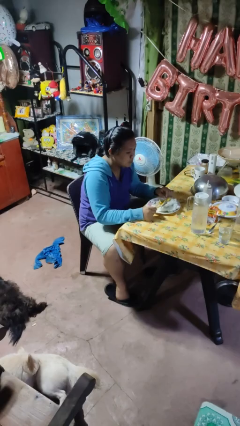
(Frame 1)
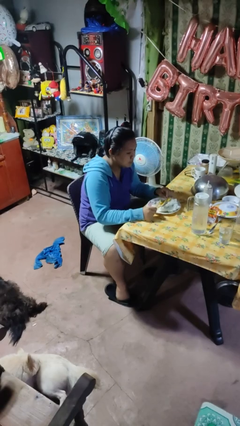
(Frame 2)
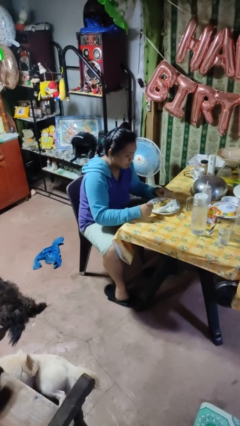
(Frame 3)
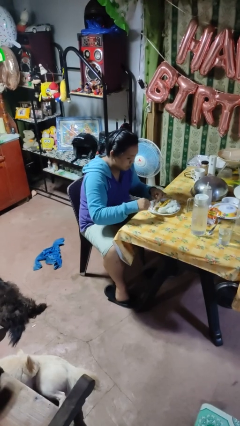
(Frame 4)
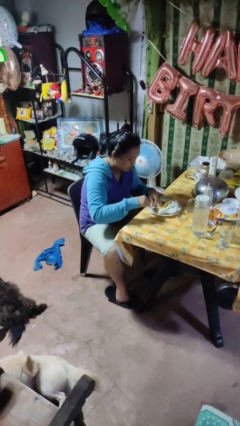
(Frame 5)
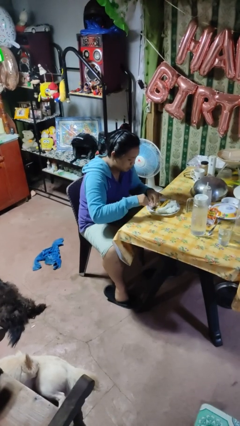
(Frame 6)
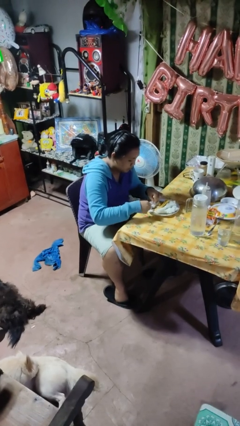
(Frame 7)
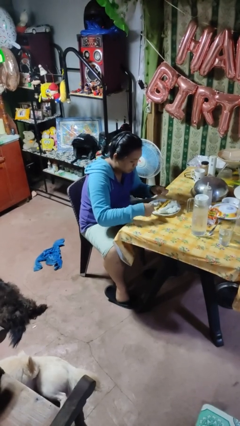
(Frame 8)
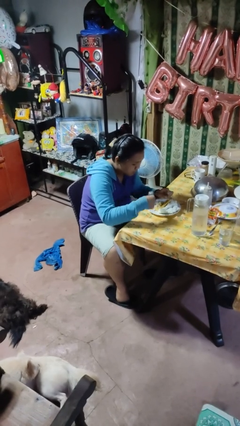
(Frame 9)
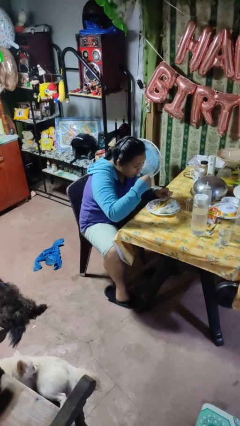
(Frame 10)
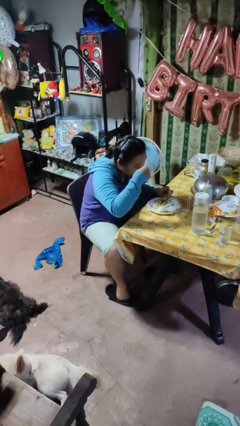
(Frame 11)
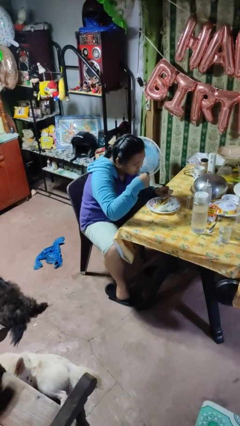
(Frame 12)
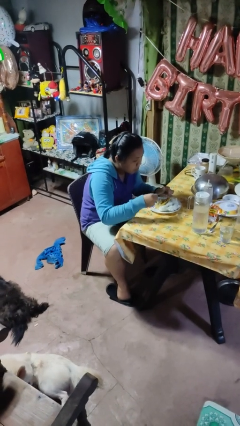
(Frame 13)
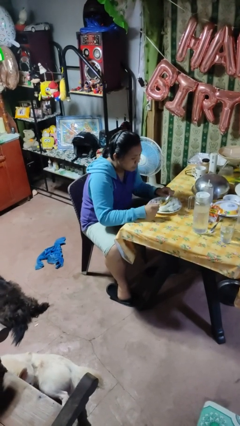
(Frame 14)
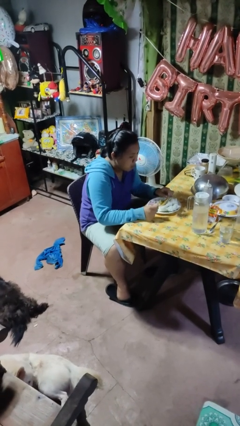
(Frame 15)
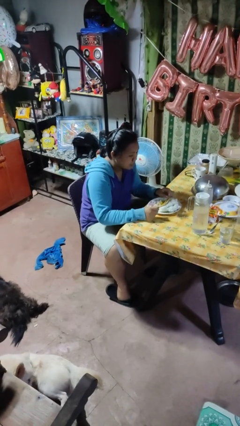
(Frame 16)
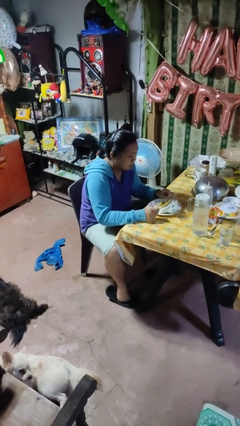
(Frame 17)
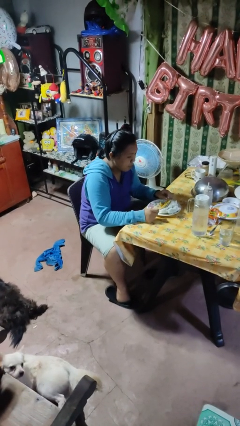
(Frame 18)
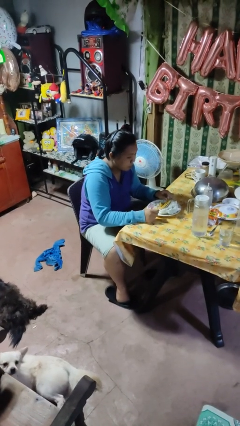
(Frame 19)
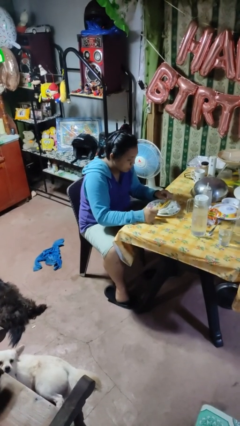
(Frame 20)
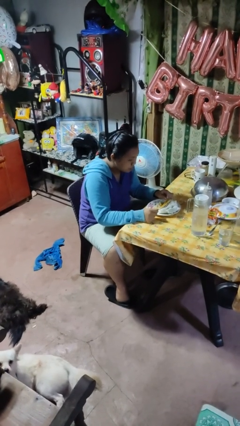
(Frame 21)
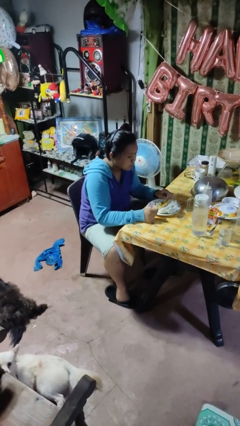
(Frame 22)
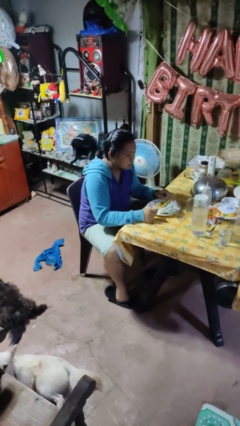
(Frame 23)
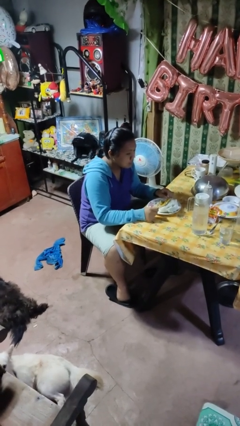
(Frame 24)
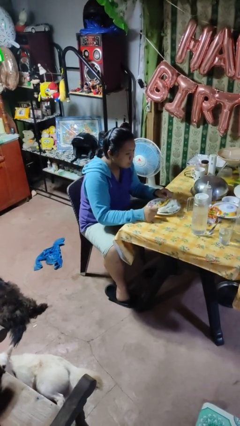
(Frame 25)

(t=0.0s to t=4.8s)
person eats with utensil

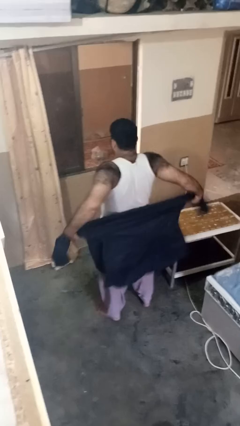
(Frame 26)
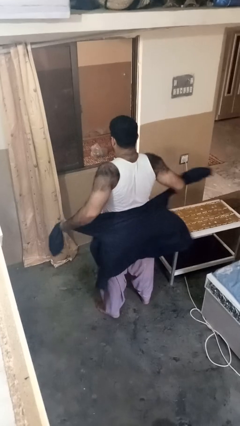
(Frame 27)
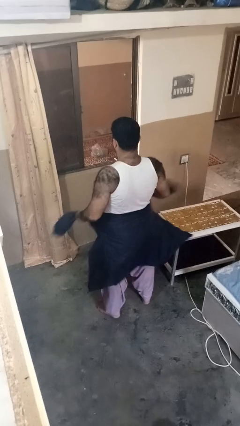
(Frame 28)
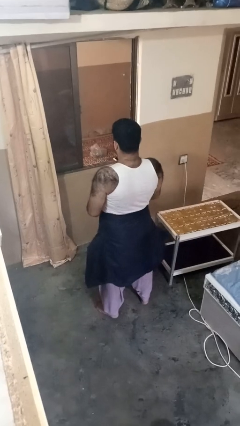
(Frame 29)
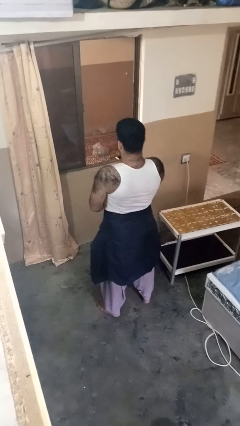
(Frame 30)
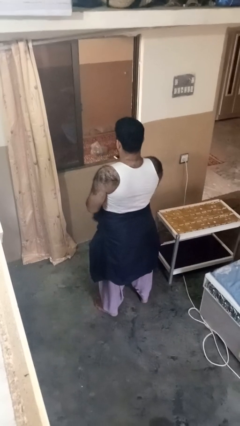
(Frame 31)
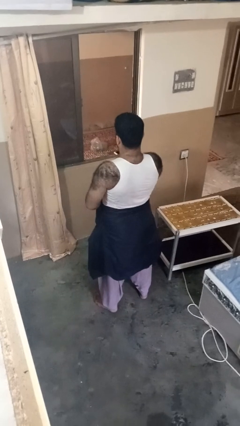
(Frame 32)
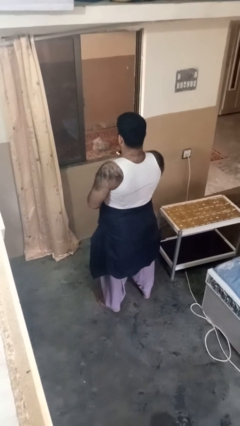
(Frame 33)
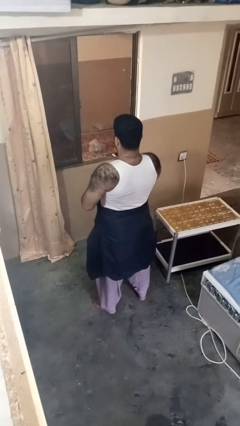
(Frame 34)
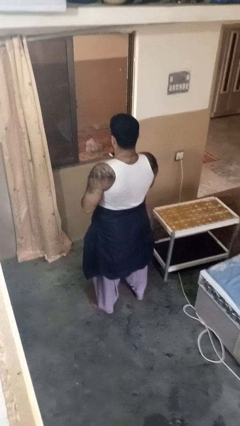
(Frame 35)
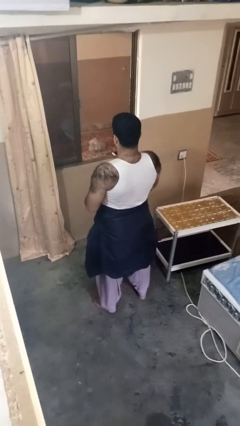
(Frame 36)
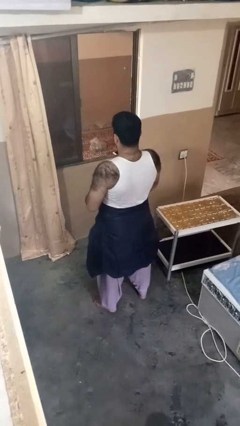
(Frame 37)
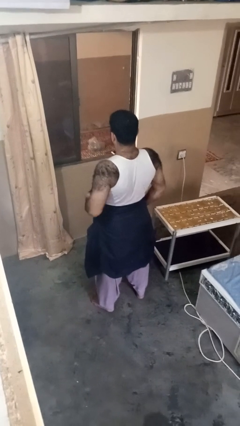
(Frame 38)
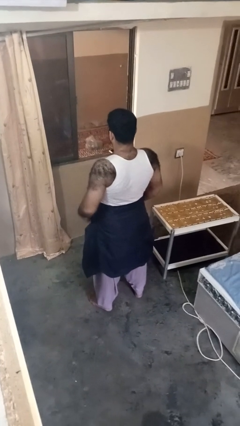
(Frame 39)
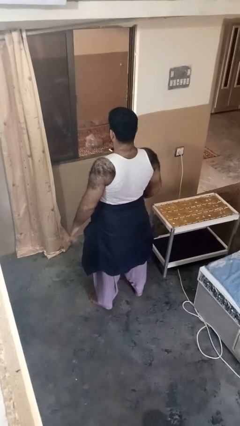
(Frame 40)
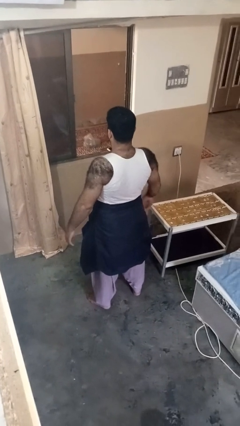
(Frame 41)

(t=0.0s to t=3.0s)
person ties jacket around waist

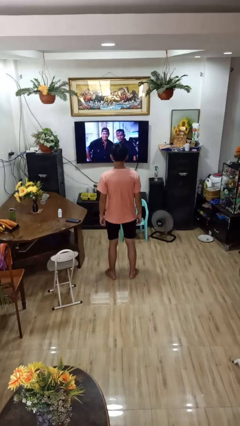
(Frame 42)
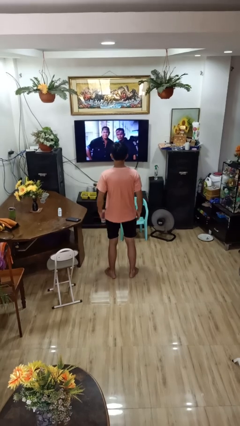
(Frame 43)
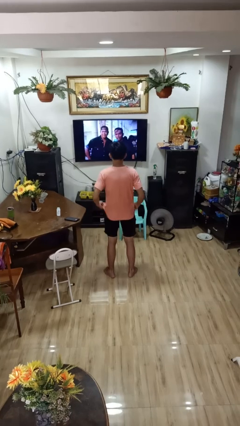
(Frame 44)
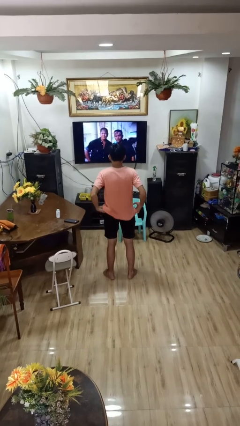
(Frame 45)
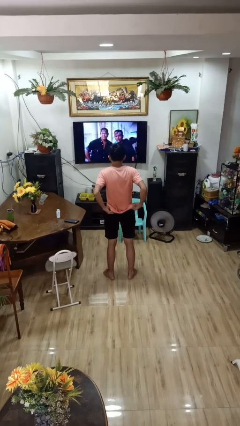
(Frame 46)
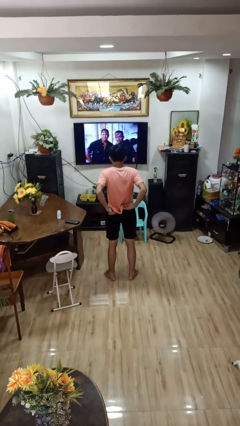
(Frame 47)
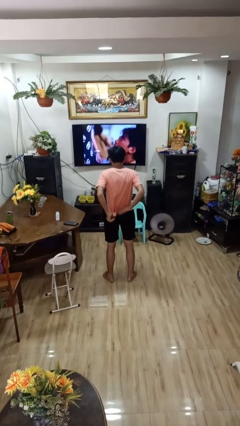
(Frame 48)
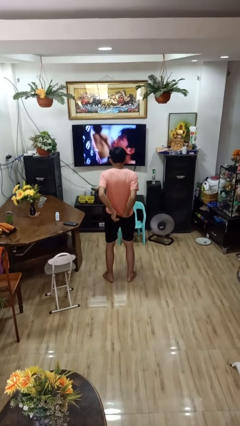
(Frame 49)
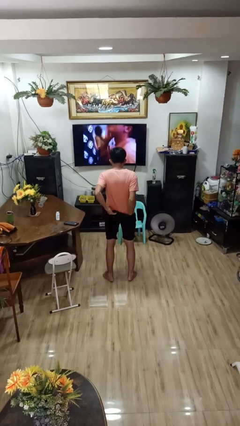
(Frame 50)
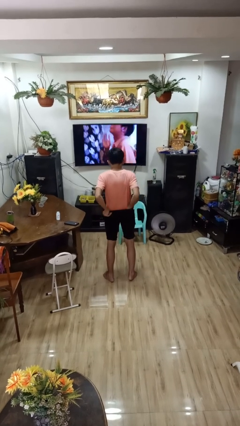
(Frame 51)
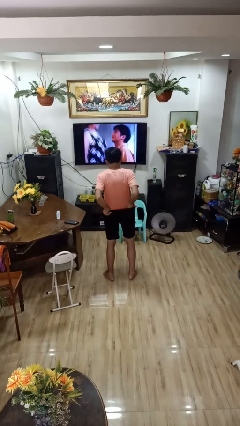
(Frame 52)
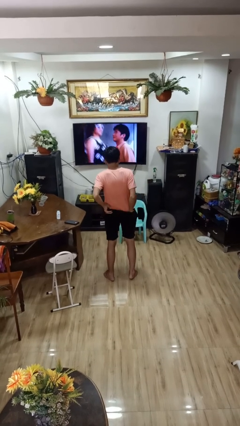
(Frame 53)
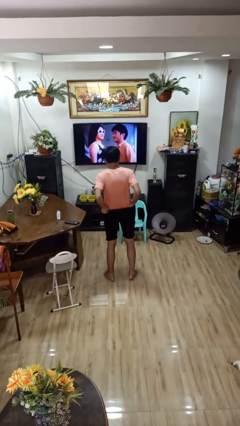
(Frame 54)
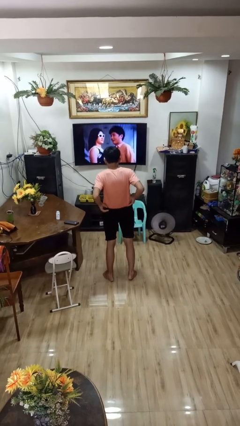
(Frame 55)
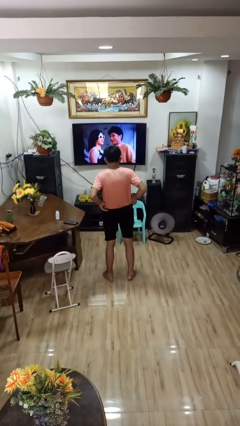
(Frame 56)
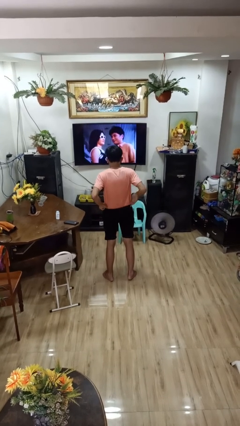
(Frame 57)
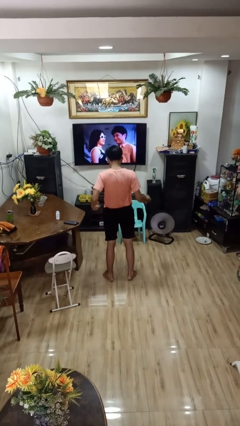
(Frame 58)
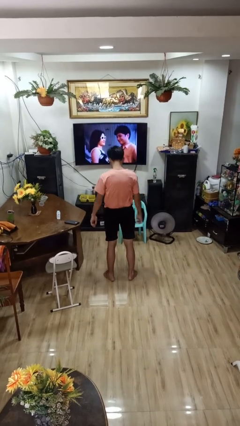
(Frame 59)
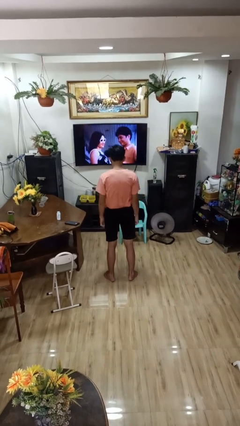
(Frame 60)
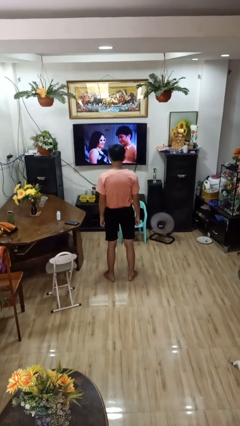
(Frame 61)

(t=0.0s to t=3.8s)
person tucks in shirt

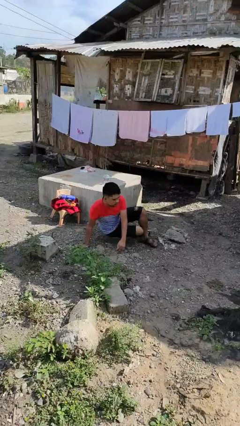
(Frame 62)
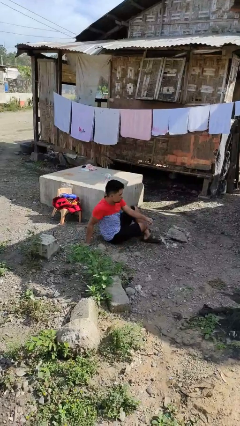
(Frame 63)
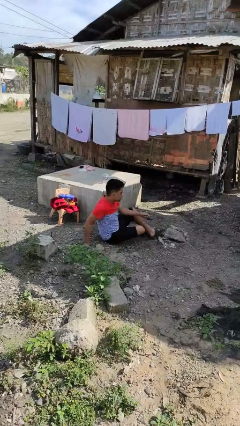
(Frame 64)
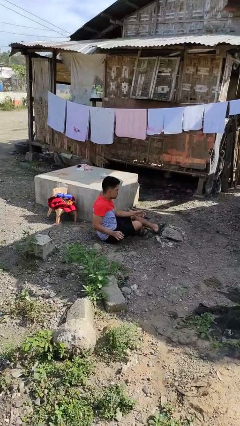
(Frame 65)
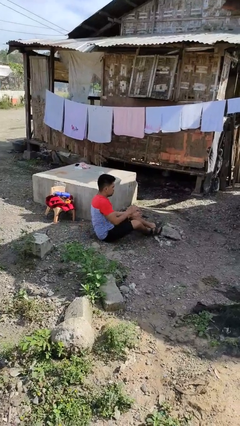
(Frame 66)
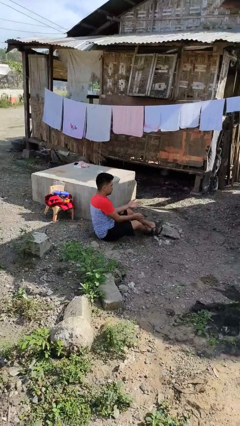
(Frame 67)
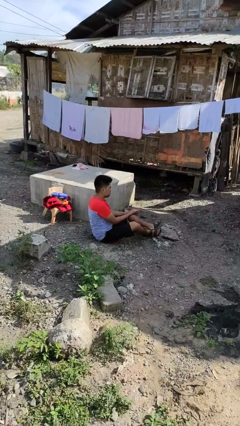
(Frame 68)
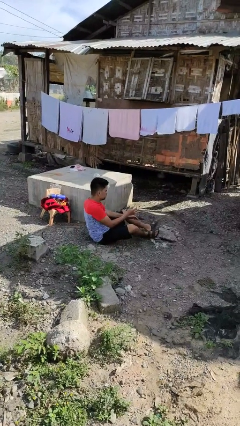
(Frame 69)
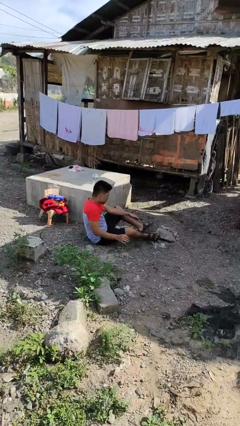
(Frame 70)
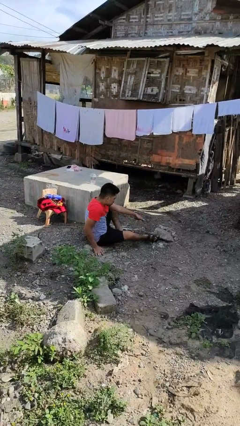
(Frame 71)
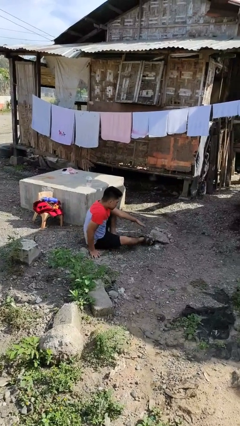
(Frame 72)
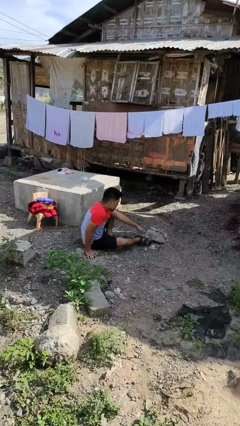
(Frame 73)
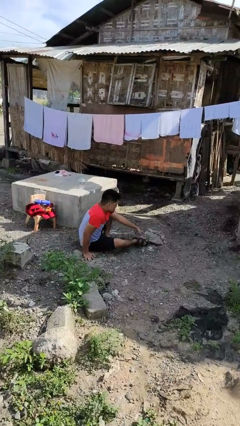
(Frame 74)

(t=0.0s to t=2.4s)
person lies down on floor

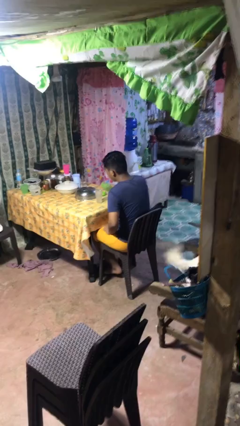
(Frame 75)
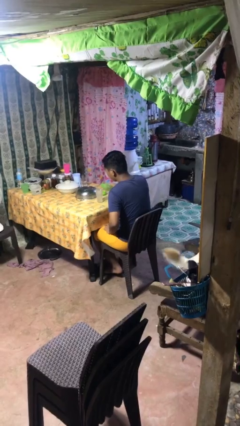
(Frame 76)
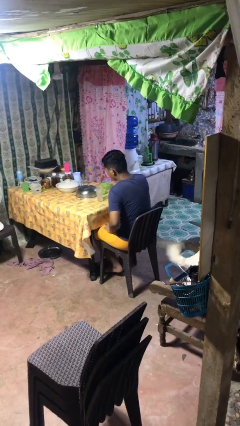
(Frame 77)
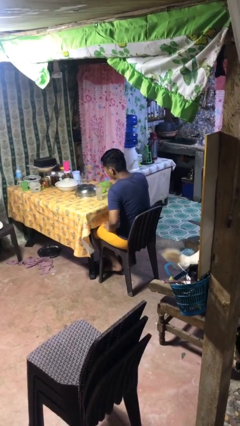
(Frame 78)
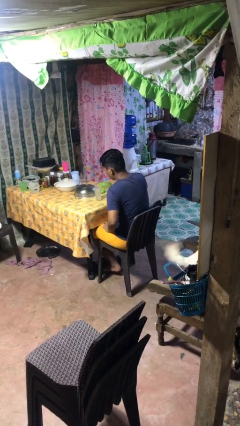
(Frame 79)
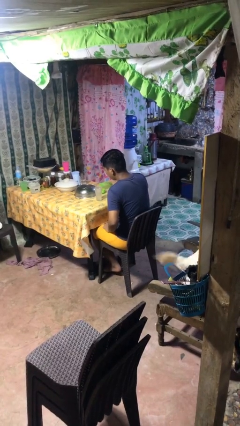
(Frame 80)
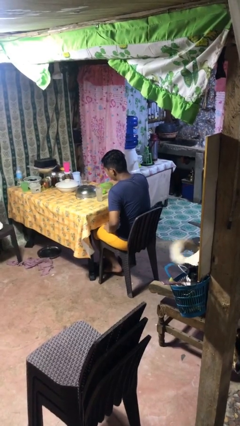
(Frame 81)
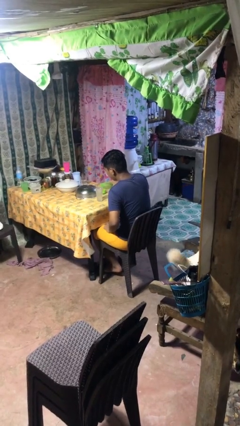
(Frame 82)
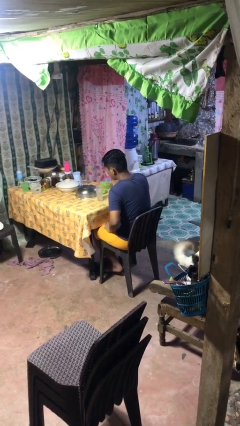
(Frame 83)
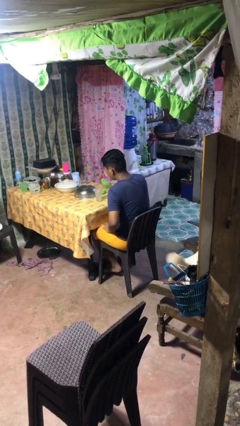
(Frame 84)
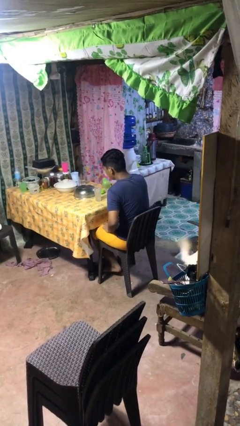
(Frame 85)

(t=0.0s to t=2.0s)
person pours liquid into cup

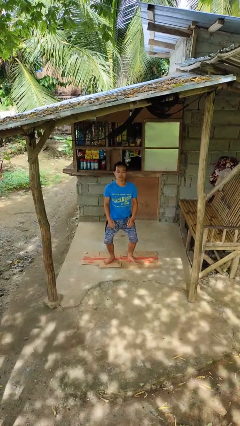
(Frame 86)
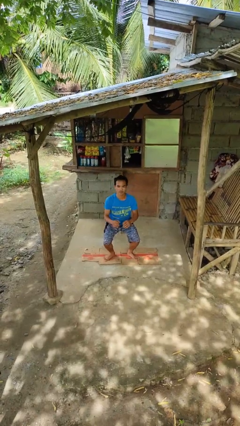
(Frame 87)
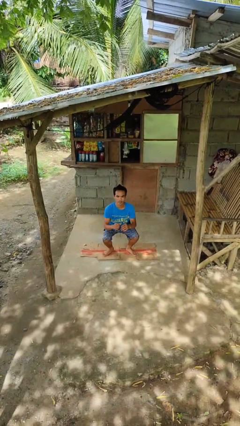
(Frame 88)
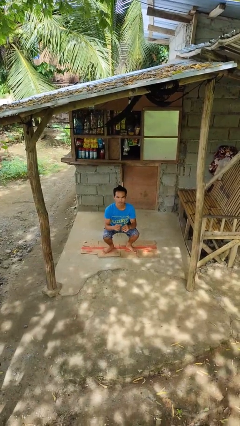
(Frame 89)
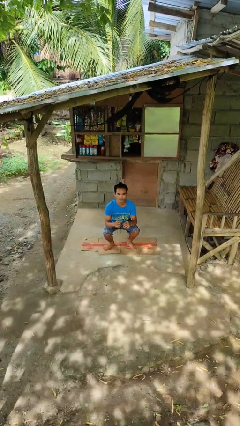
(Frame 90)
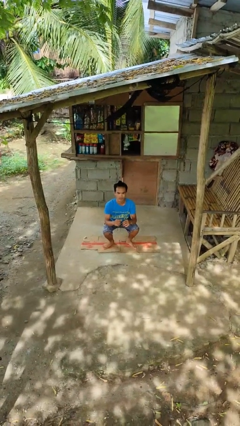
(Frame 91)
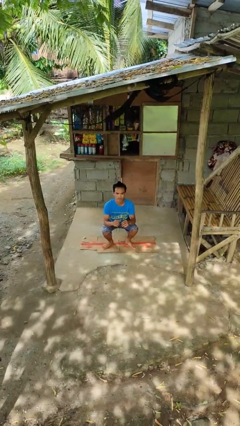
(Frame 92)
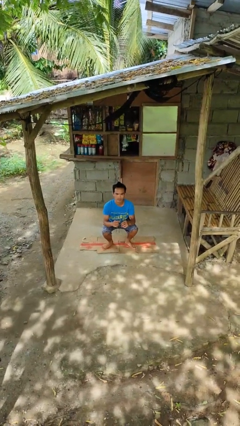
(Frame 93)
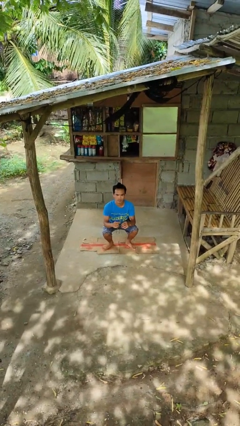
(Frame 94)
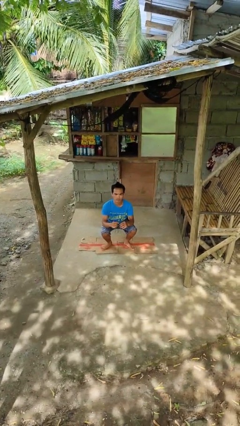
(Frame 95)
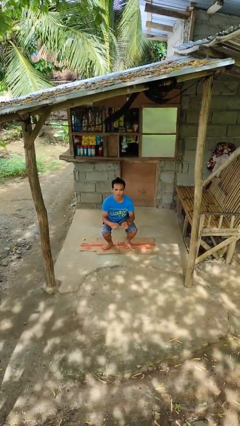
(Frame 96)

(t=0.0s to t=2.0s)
person squats
